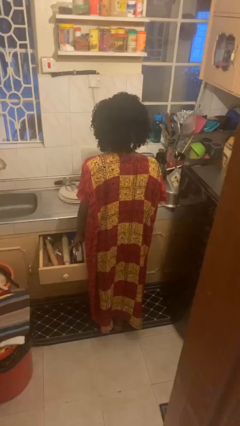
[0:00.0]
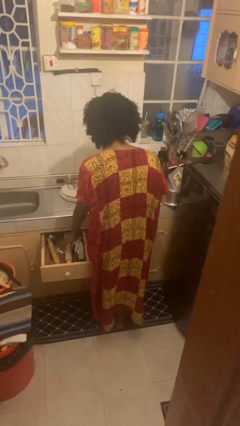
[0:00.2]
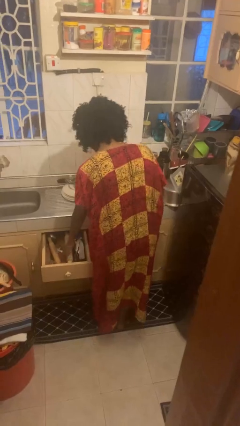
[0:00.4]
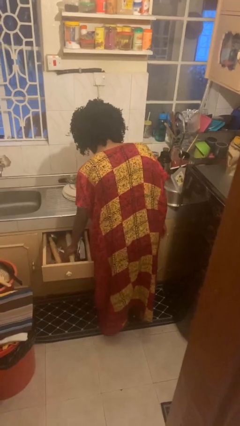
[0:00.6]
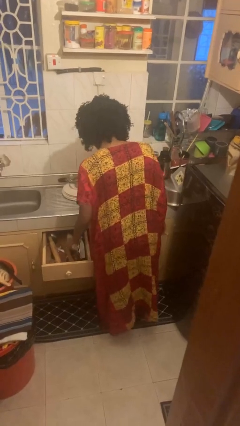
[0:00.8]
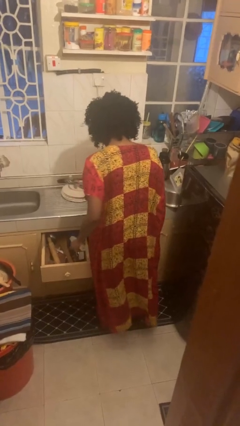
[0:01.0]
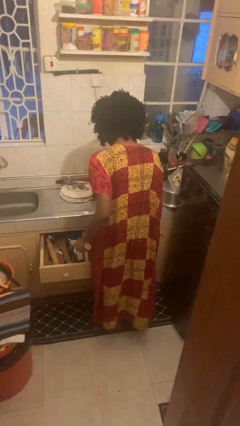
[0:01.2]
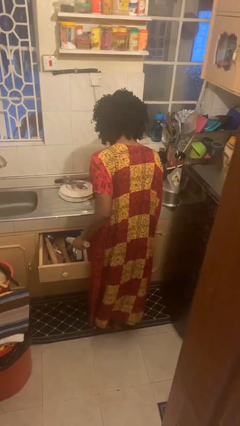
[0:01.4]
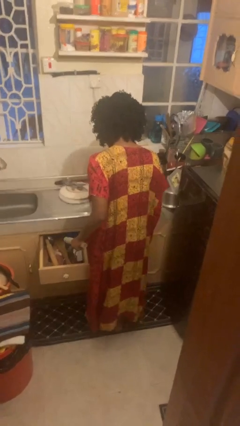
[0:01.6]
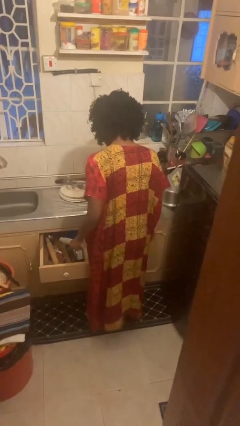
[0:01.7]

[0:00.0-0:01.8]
person takes object from kitchen drawer

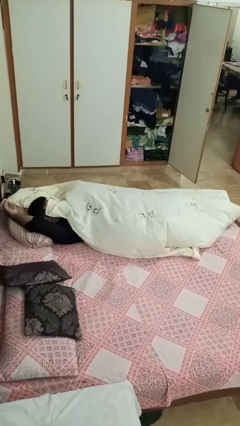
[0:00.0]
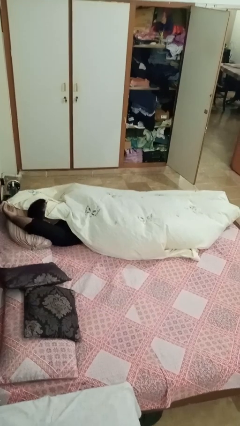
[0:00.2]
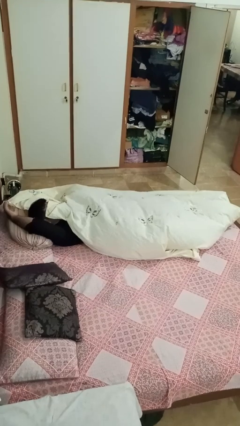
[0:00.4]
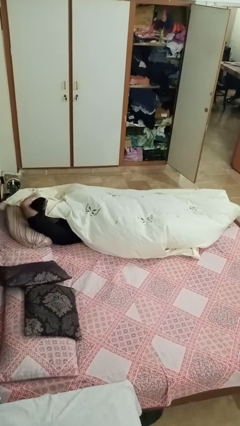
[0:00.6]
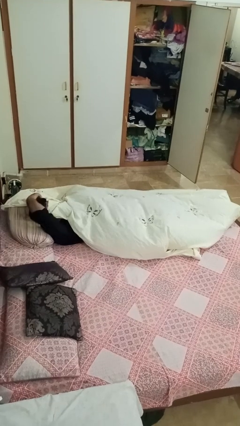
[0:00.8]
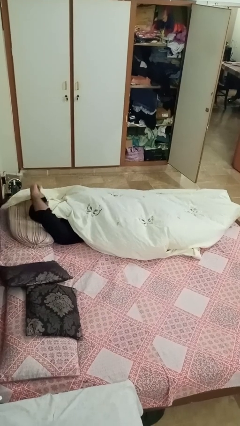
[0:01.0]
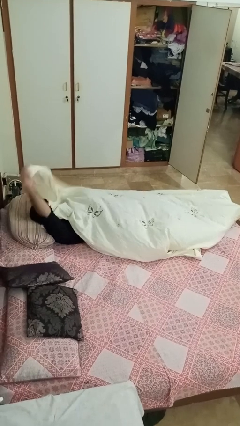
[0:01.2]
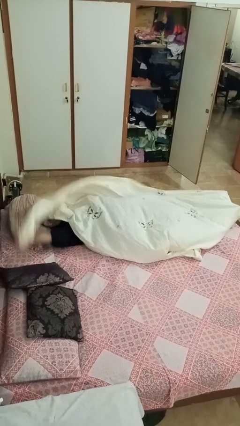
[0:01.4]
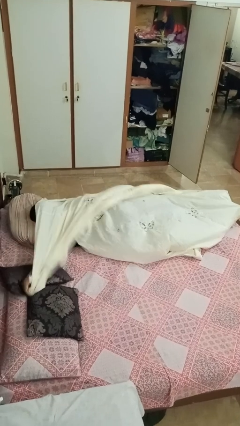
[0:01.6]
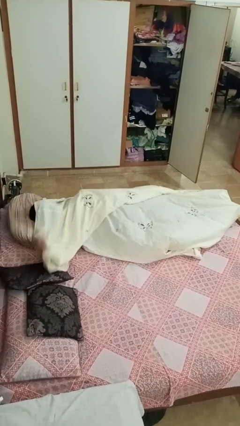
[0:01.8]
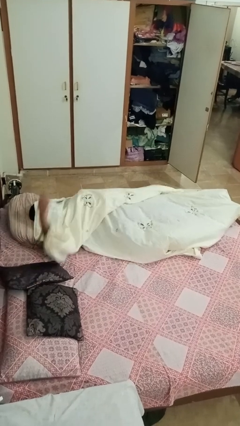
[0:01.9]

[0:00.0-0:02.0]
person uncovers with bedsheets

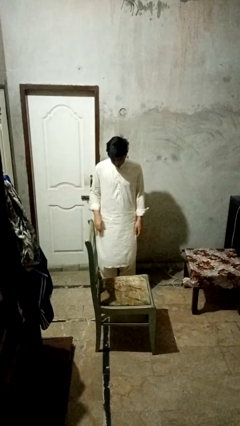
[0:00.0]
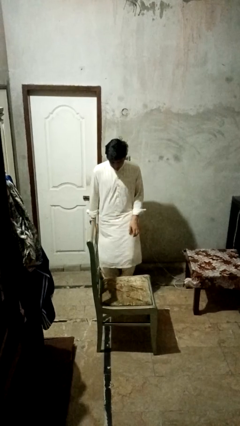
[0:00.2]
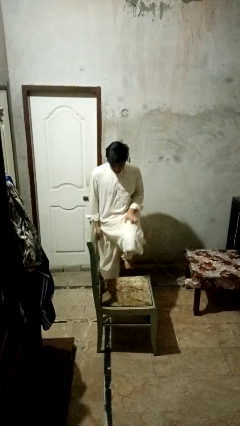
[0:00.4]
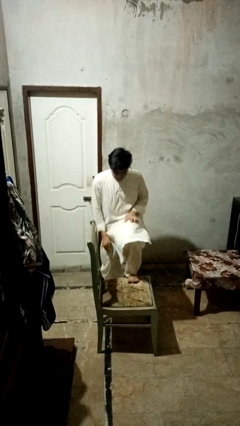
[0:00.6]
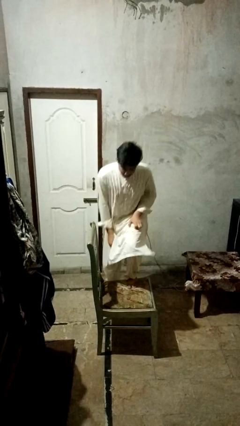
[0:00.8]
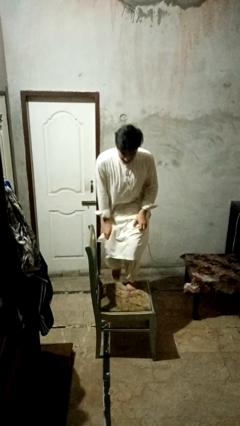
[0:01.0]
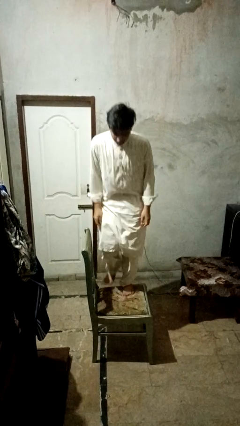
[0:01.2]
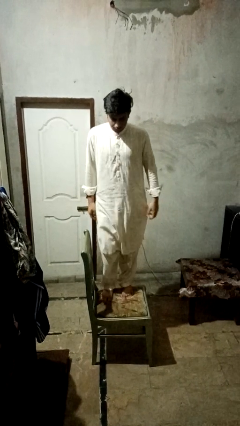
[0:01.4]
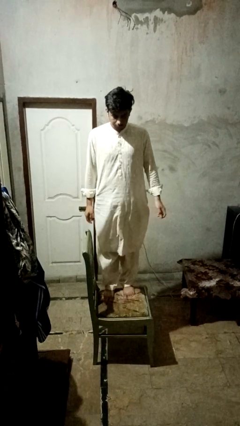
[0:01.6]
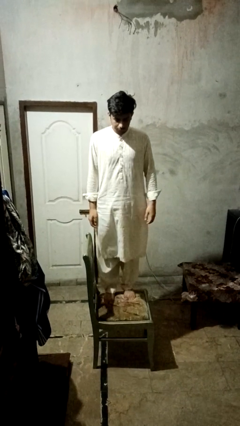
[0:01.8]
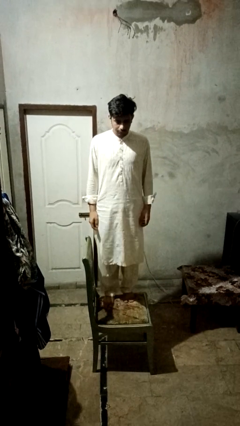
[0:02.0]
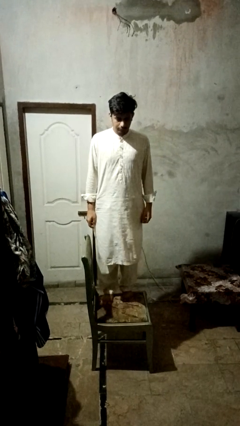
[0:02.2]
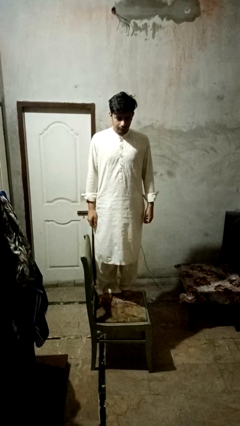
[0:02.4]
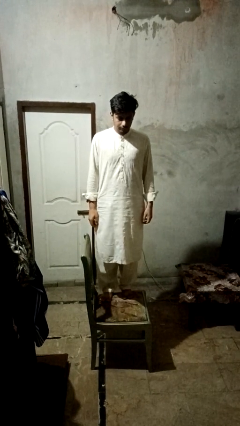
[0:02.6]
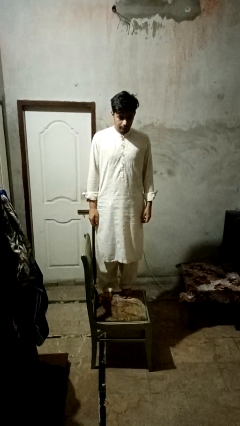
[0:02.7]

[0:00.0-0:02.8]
person climbs on chair

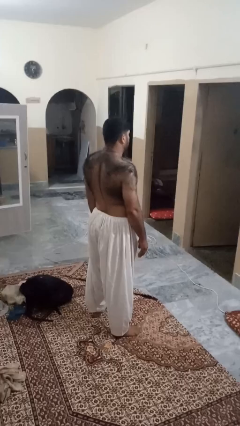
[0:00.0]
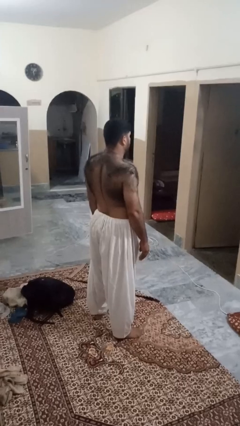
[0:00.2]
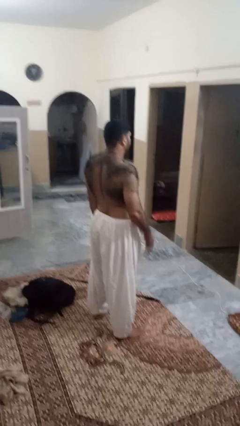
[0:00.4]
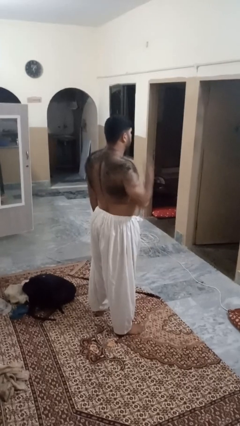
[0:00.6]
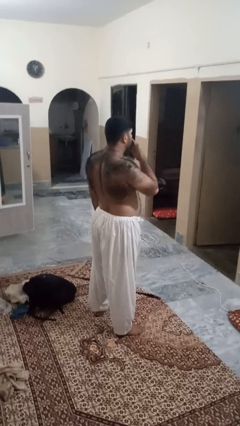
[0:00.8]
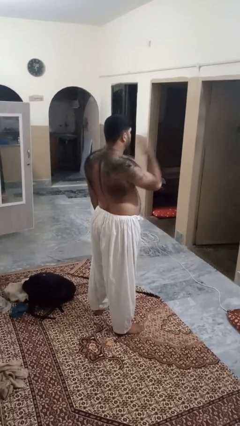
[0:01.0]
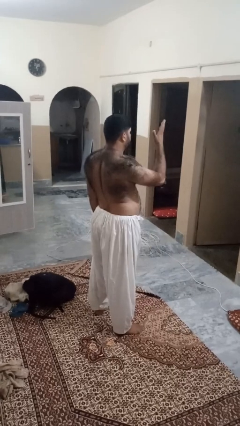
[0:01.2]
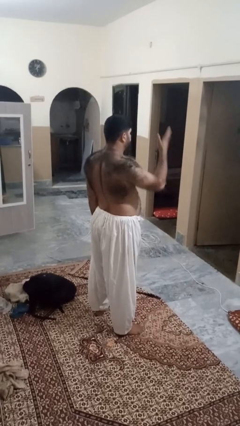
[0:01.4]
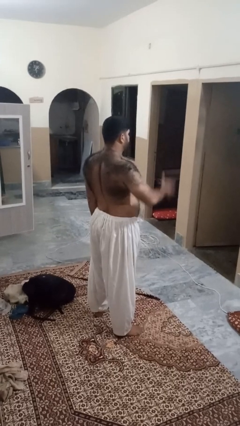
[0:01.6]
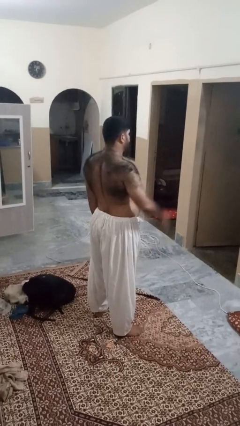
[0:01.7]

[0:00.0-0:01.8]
person gestures blow kiss

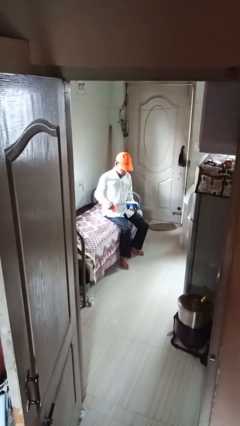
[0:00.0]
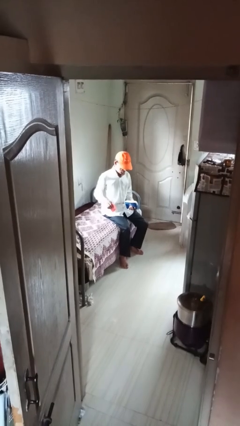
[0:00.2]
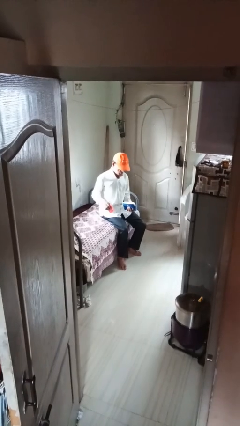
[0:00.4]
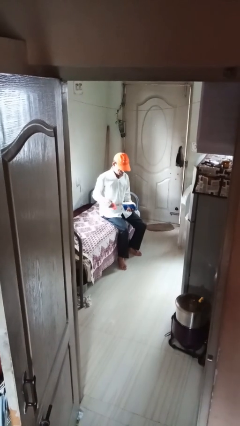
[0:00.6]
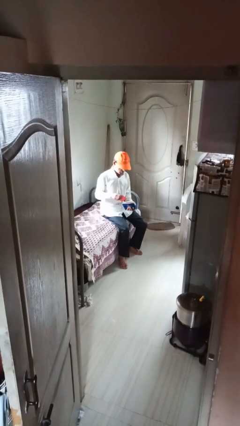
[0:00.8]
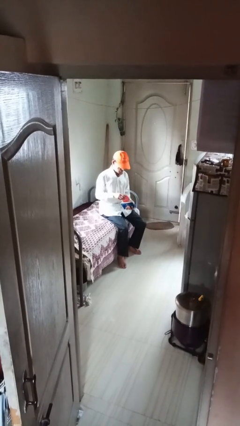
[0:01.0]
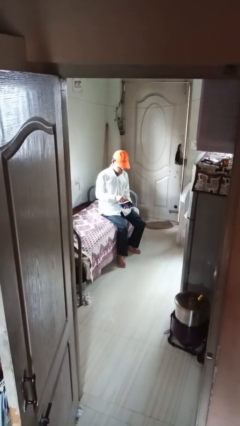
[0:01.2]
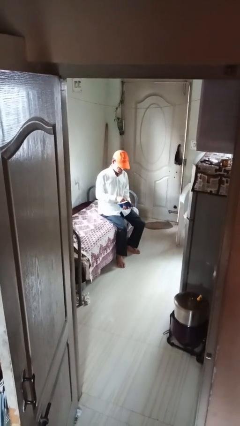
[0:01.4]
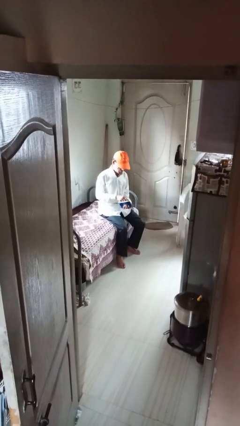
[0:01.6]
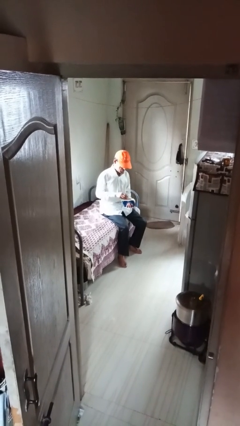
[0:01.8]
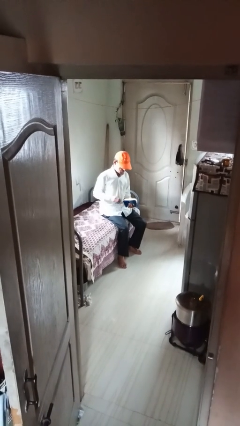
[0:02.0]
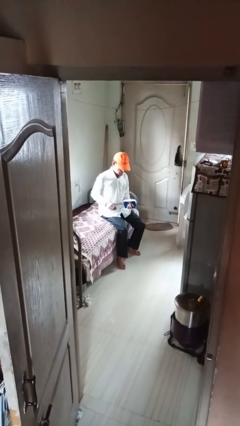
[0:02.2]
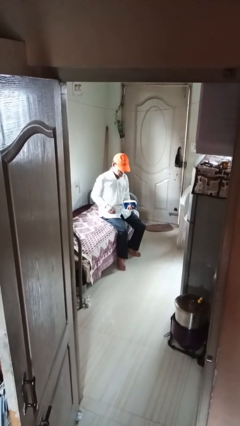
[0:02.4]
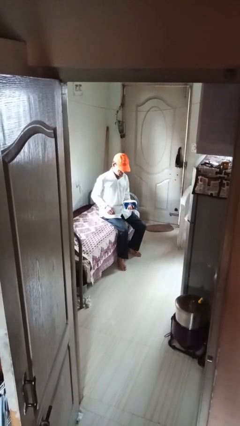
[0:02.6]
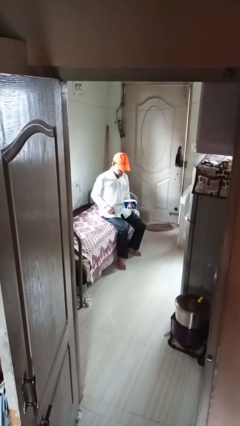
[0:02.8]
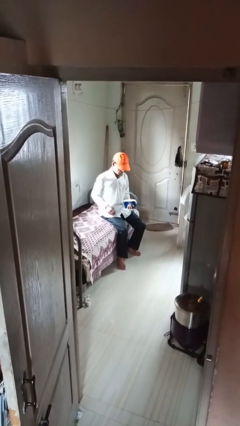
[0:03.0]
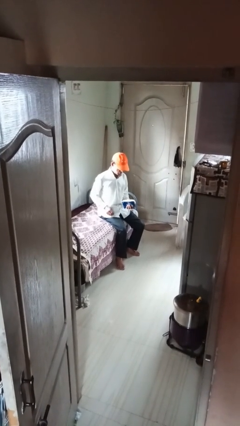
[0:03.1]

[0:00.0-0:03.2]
person puts object into purse

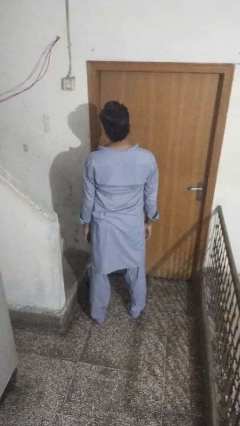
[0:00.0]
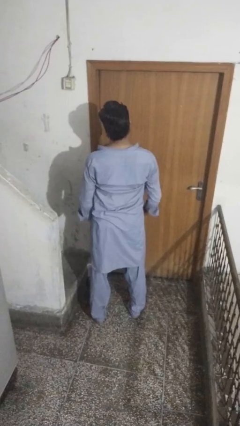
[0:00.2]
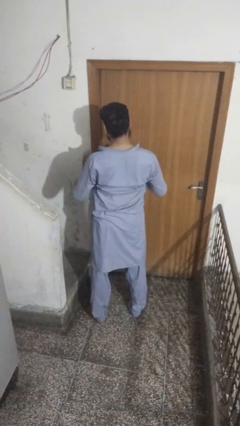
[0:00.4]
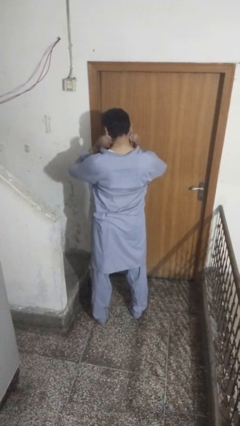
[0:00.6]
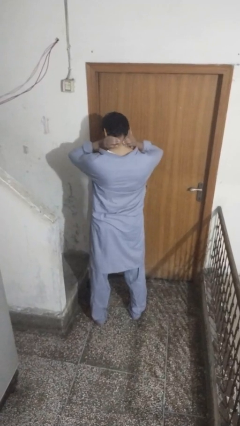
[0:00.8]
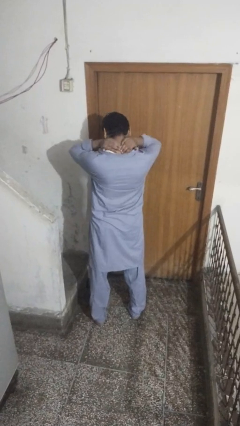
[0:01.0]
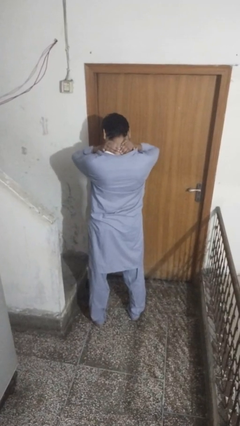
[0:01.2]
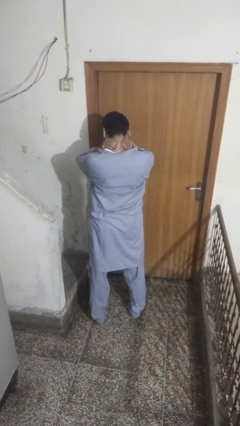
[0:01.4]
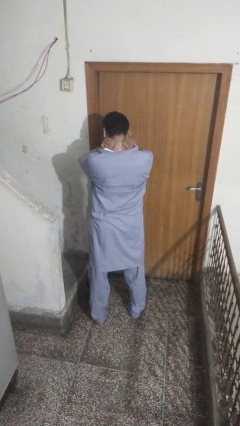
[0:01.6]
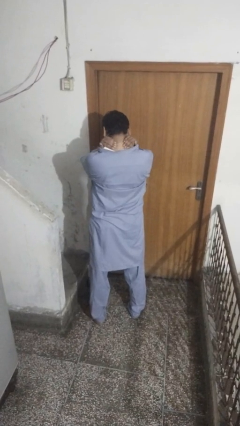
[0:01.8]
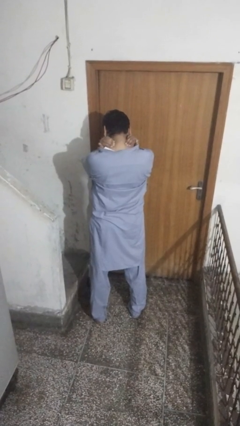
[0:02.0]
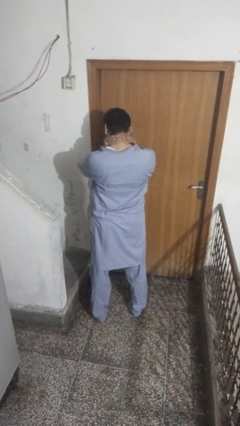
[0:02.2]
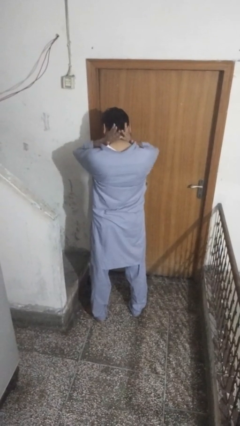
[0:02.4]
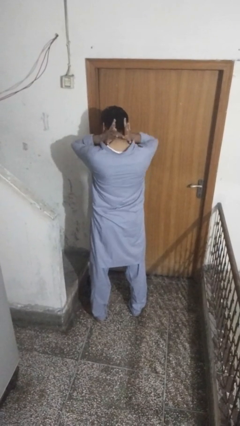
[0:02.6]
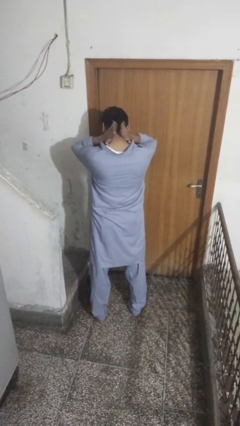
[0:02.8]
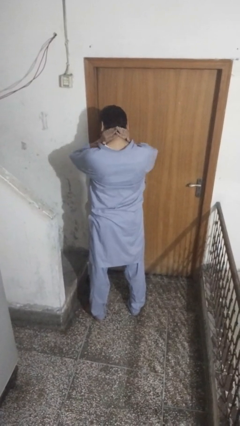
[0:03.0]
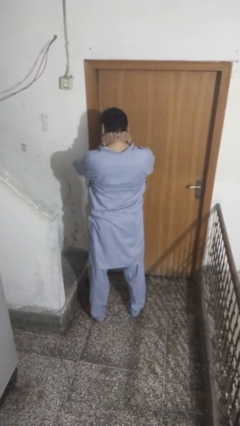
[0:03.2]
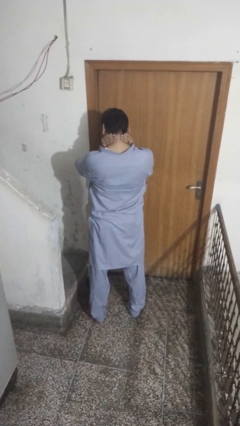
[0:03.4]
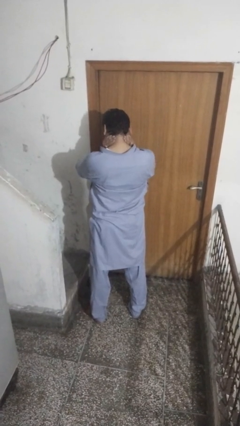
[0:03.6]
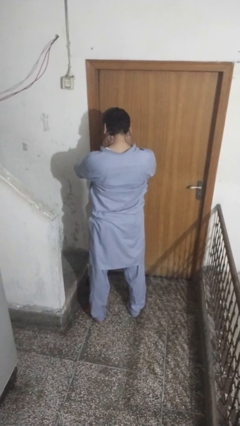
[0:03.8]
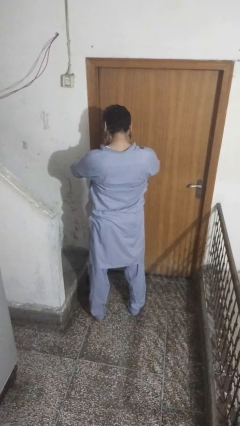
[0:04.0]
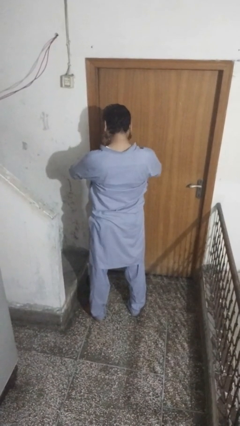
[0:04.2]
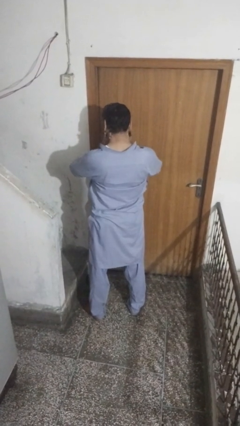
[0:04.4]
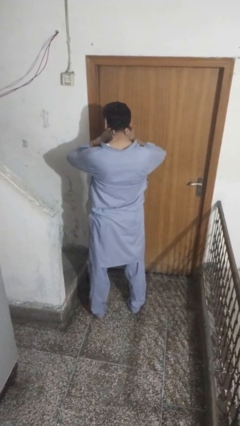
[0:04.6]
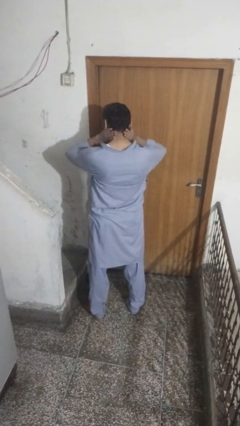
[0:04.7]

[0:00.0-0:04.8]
person rubs neck

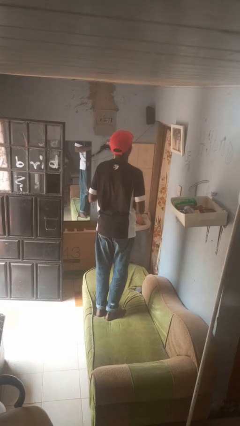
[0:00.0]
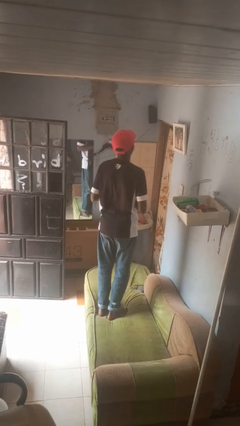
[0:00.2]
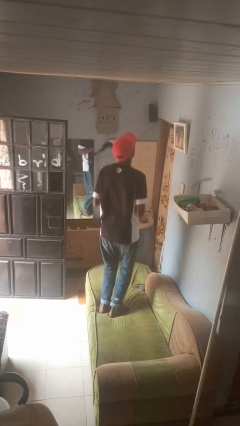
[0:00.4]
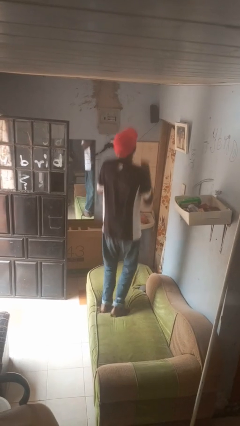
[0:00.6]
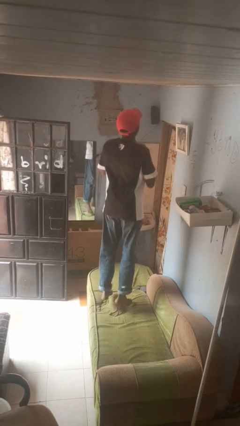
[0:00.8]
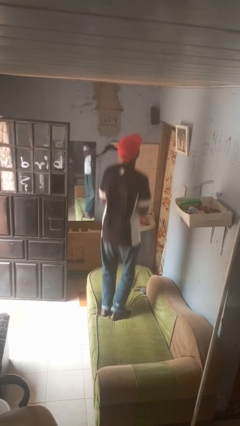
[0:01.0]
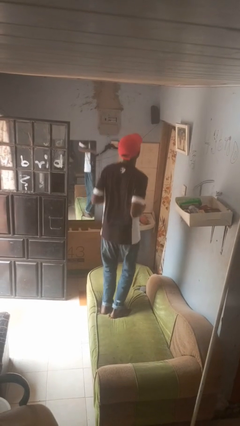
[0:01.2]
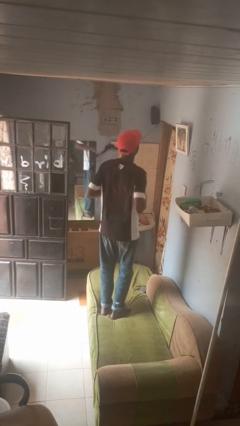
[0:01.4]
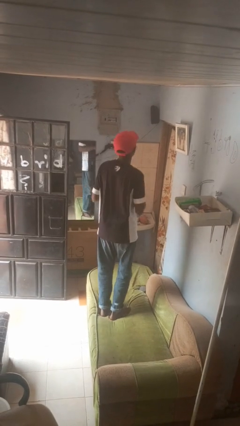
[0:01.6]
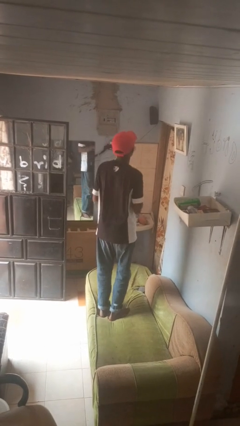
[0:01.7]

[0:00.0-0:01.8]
person jumps on couch
